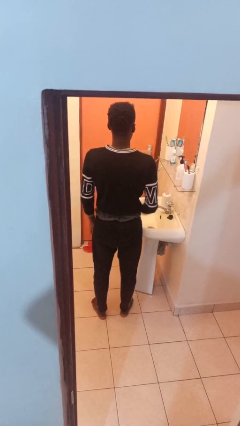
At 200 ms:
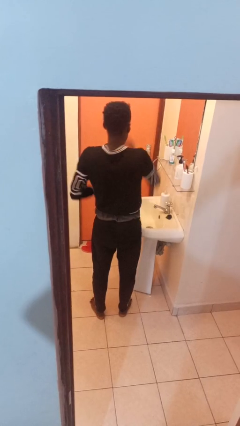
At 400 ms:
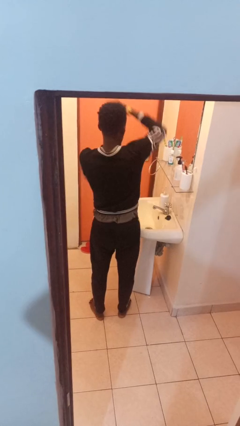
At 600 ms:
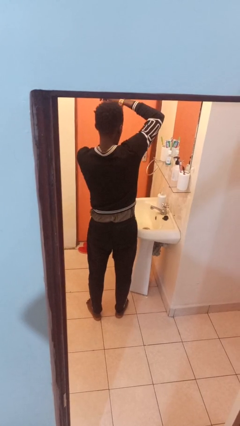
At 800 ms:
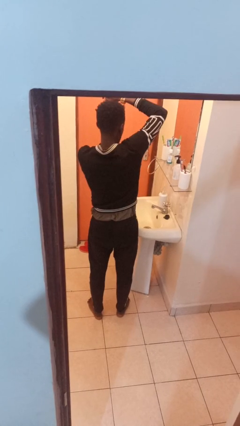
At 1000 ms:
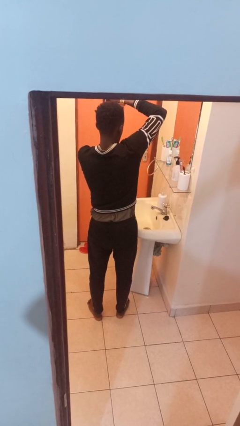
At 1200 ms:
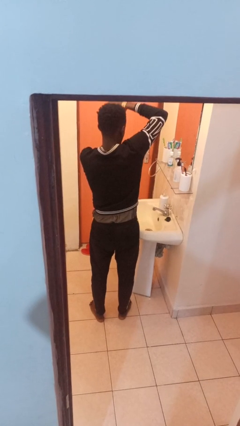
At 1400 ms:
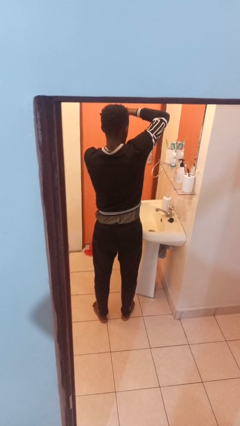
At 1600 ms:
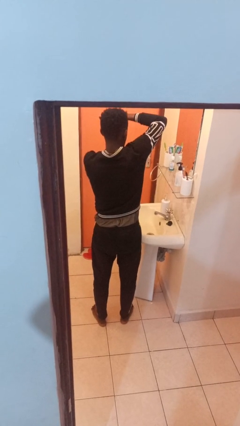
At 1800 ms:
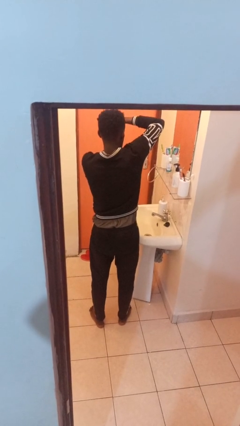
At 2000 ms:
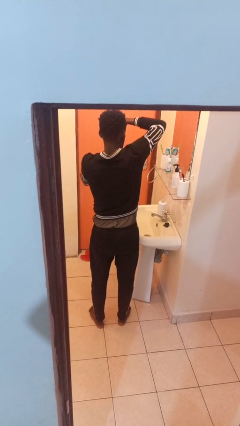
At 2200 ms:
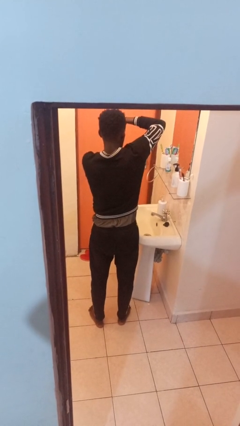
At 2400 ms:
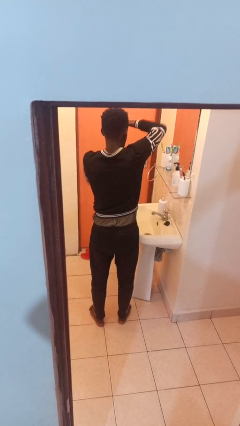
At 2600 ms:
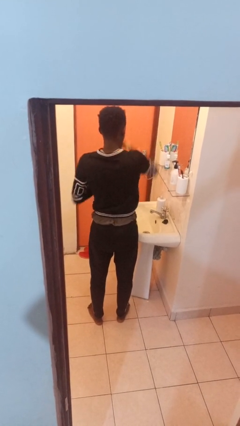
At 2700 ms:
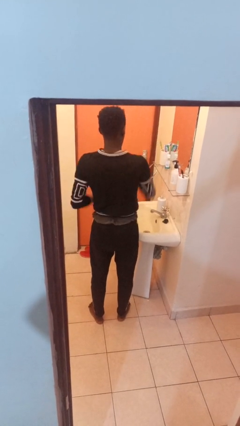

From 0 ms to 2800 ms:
person applies deodorant

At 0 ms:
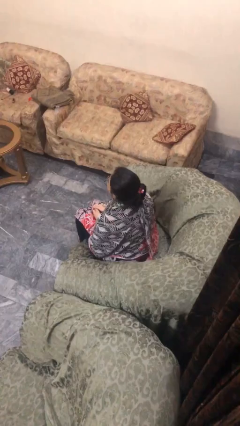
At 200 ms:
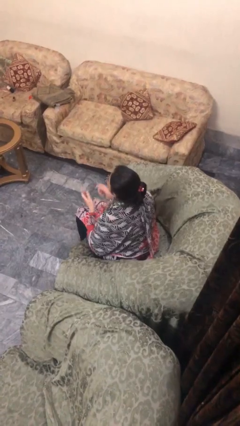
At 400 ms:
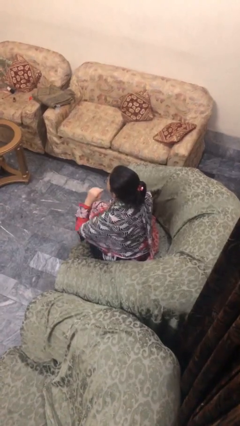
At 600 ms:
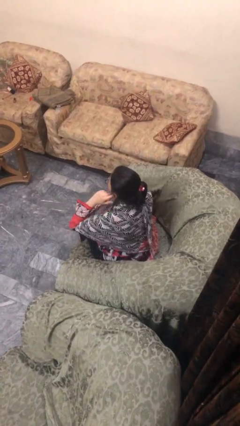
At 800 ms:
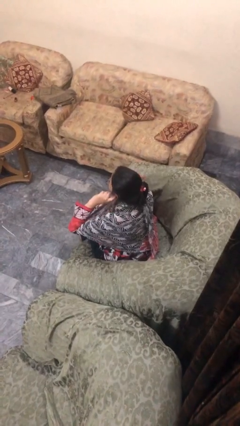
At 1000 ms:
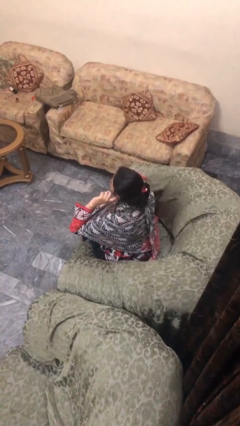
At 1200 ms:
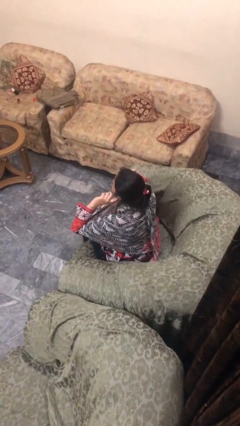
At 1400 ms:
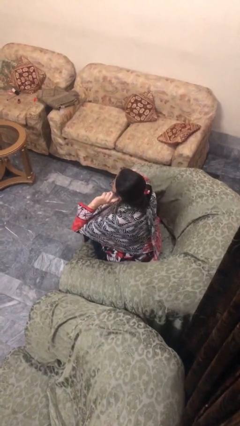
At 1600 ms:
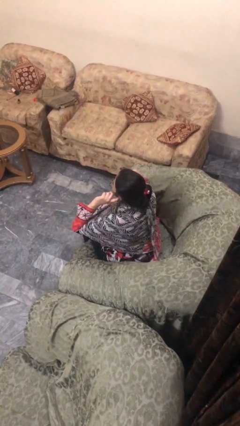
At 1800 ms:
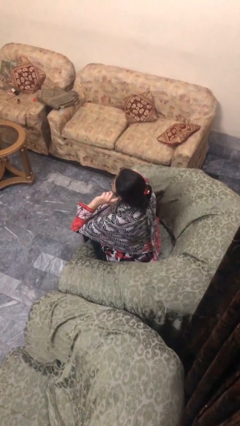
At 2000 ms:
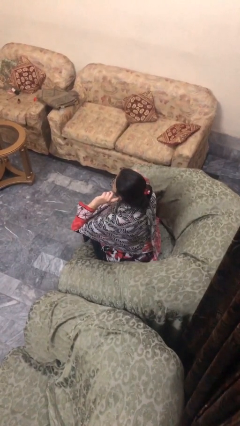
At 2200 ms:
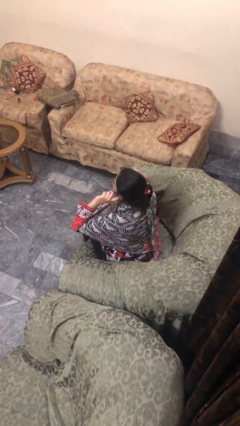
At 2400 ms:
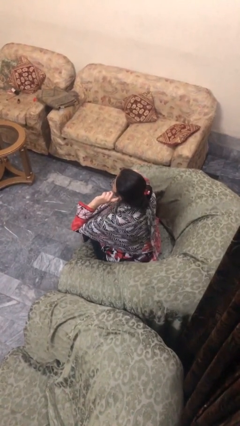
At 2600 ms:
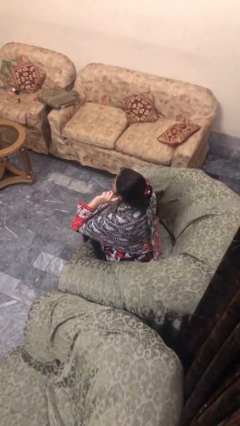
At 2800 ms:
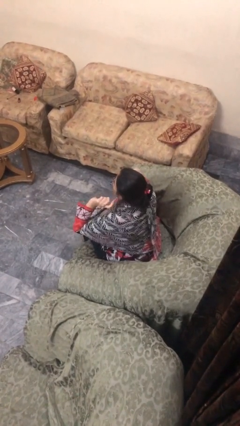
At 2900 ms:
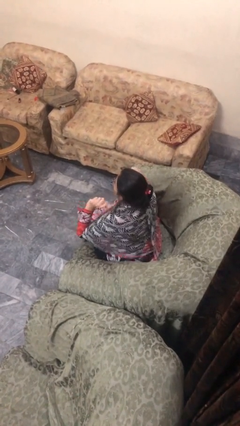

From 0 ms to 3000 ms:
person puts fingers in ear

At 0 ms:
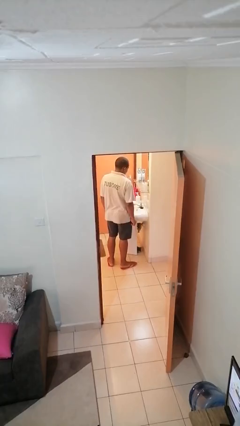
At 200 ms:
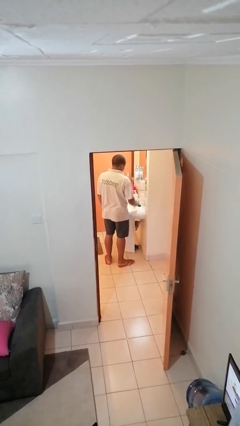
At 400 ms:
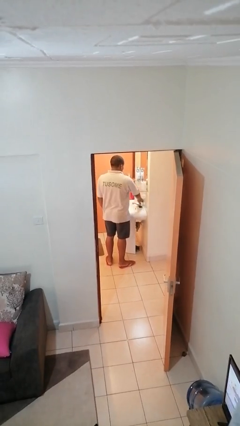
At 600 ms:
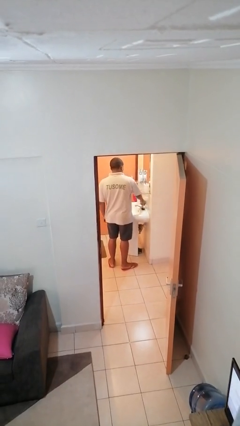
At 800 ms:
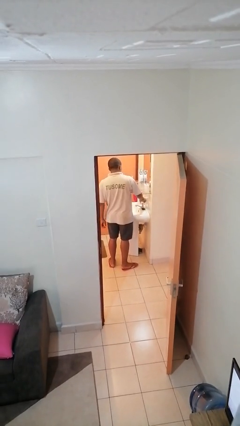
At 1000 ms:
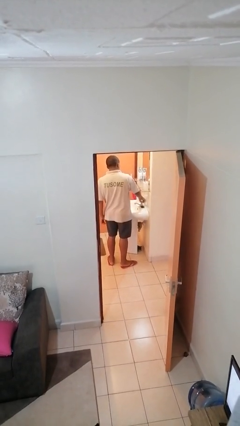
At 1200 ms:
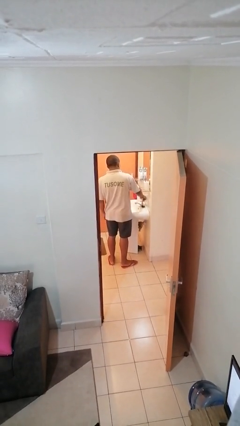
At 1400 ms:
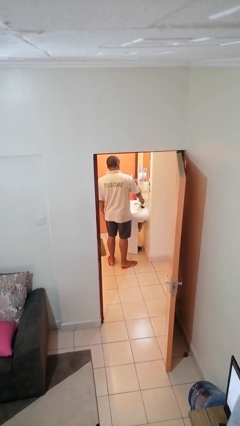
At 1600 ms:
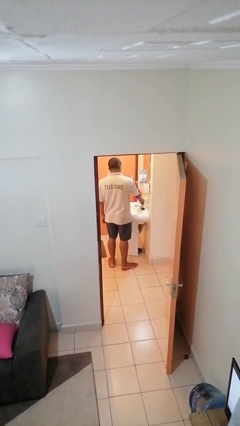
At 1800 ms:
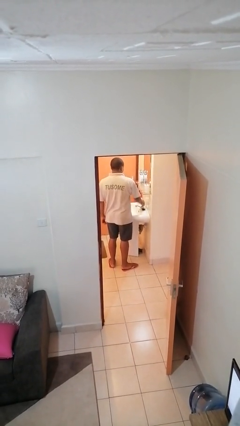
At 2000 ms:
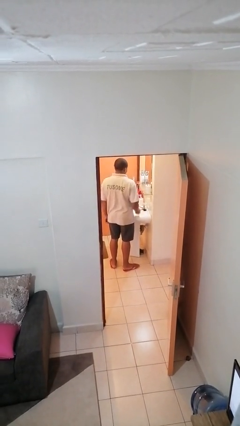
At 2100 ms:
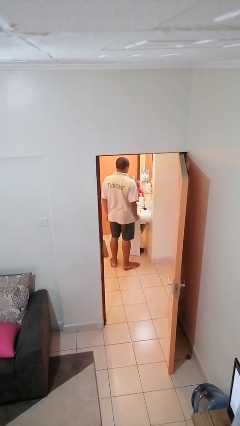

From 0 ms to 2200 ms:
person turns off faucet

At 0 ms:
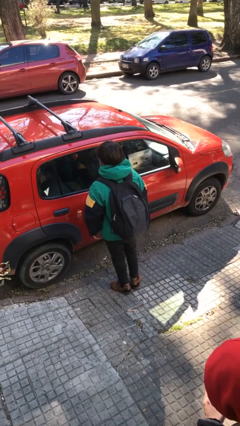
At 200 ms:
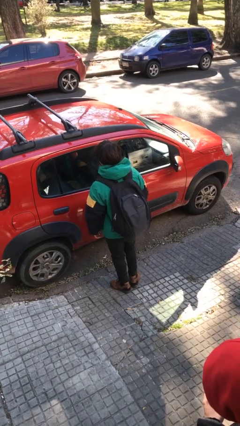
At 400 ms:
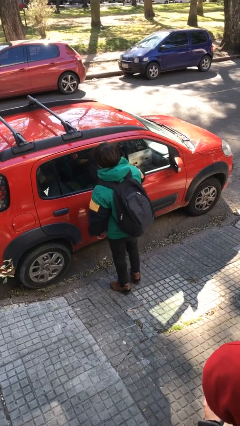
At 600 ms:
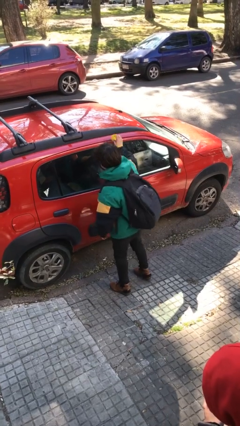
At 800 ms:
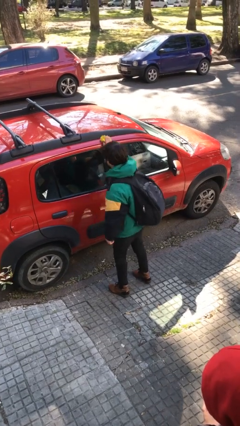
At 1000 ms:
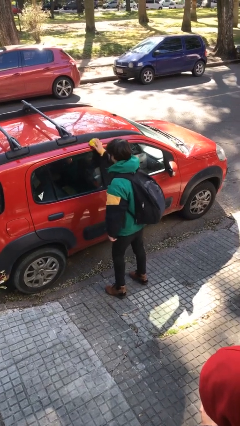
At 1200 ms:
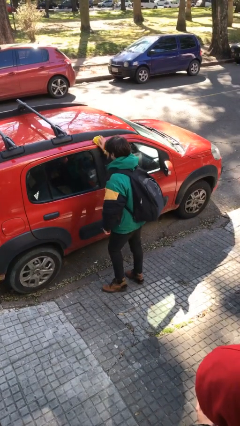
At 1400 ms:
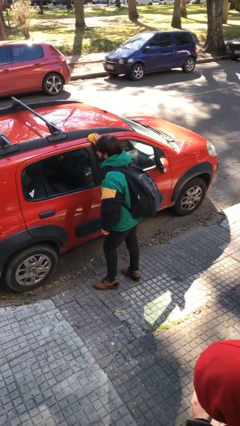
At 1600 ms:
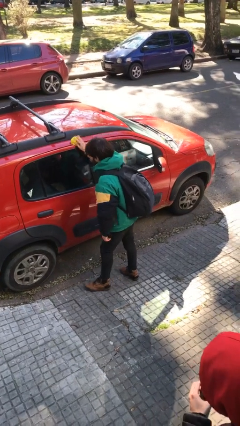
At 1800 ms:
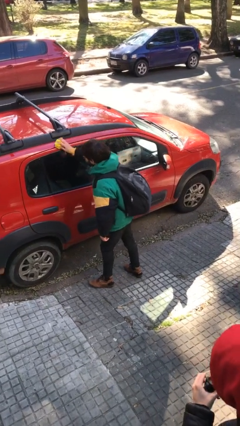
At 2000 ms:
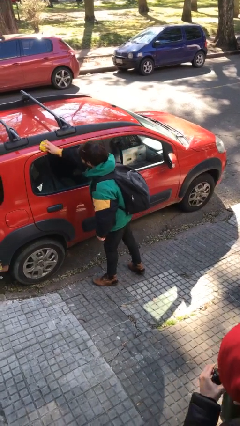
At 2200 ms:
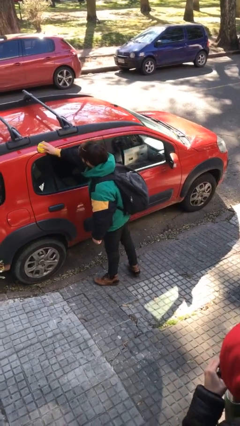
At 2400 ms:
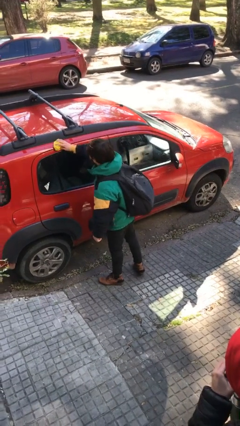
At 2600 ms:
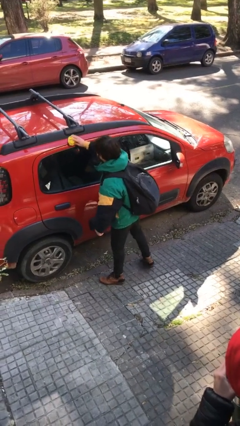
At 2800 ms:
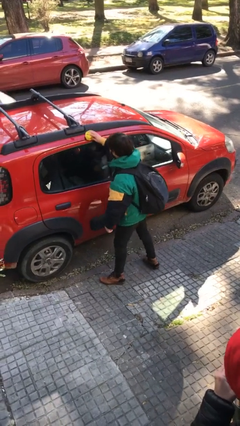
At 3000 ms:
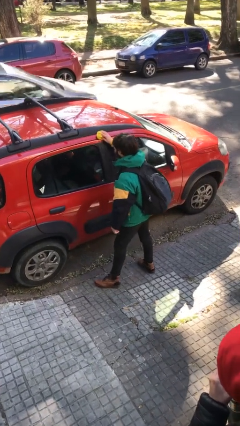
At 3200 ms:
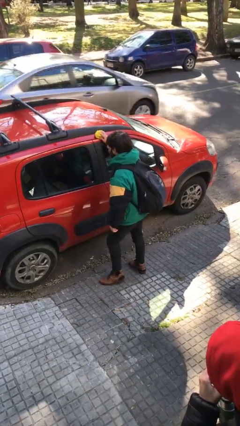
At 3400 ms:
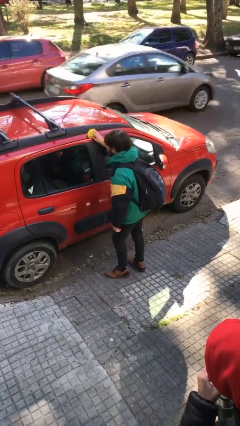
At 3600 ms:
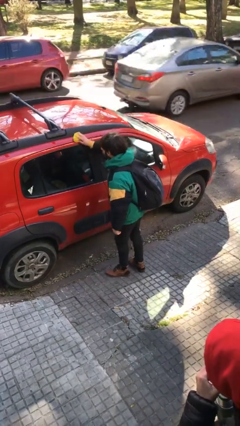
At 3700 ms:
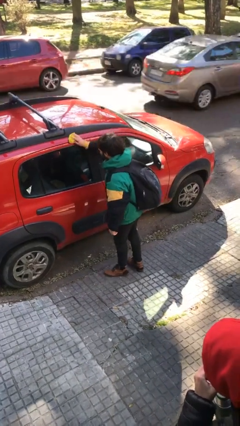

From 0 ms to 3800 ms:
person polishes car with rag

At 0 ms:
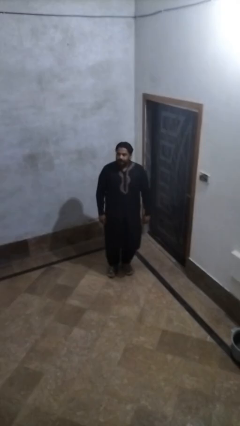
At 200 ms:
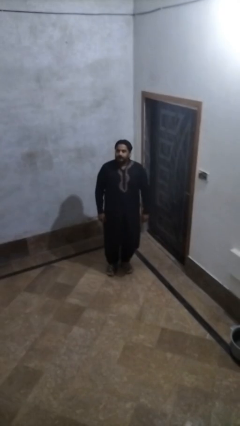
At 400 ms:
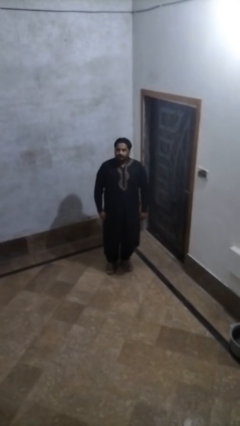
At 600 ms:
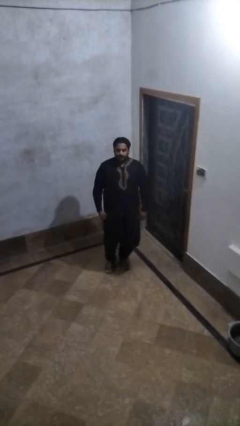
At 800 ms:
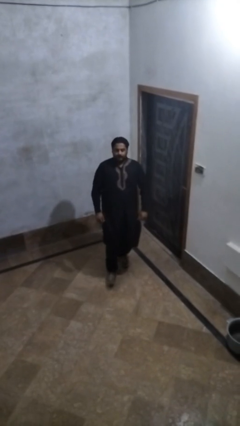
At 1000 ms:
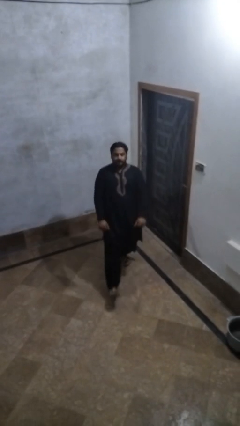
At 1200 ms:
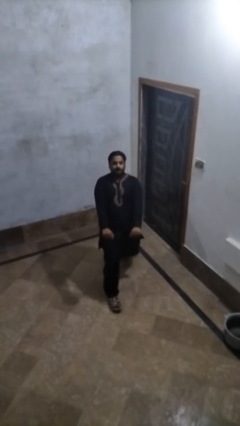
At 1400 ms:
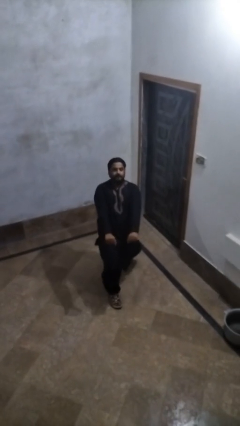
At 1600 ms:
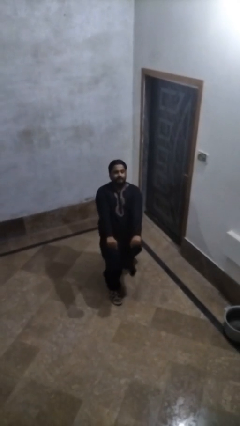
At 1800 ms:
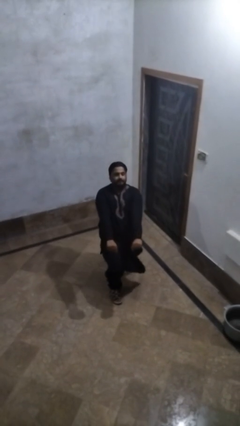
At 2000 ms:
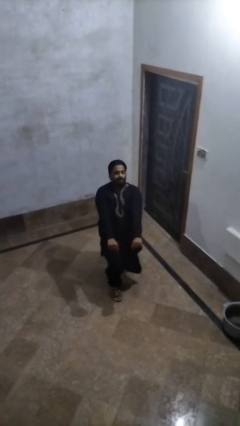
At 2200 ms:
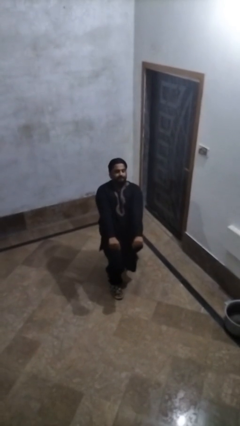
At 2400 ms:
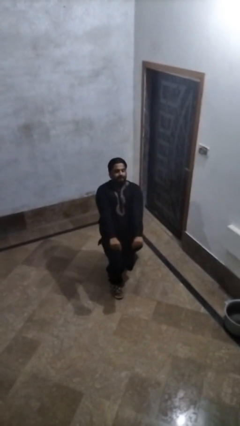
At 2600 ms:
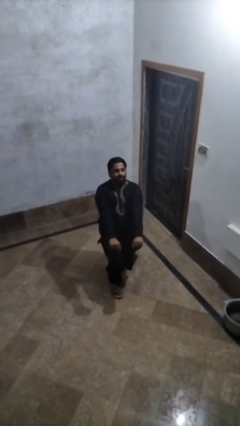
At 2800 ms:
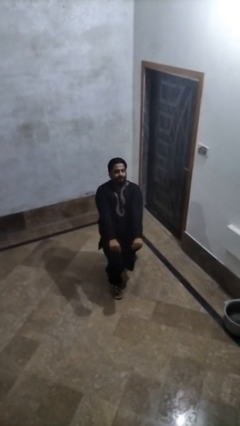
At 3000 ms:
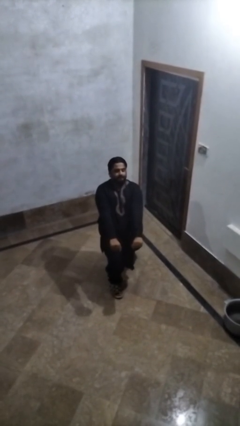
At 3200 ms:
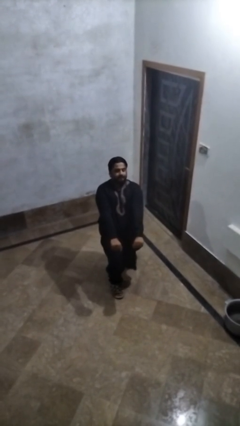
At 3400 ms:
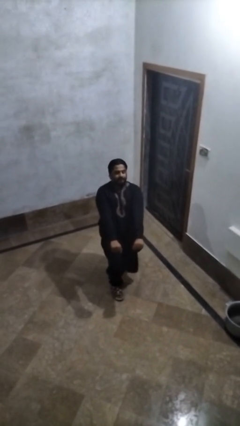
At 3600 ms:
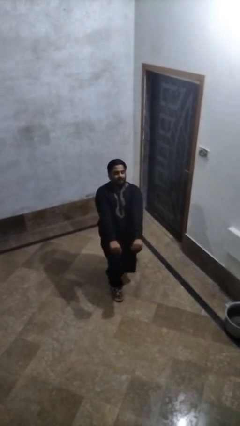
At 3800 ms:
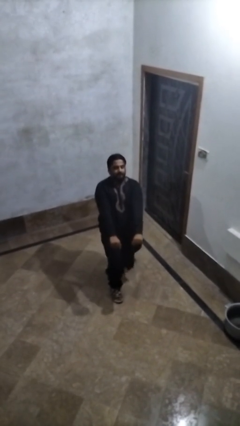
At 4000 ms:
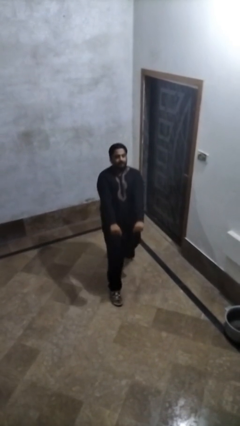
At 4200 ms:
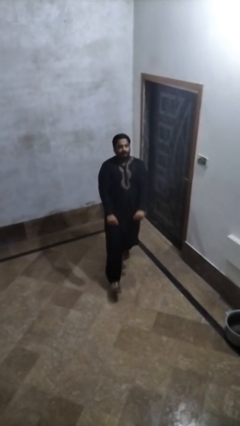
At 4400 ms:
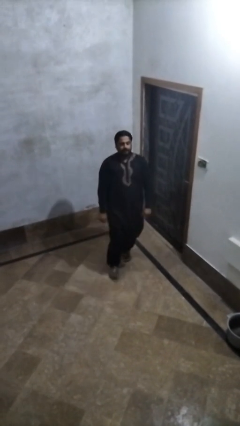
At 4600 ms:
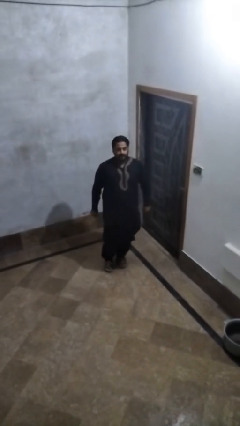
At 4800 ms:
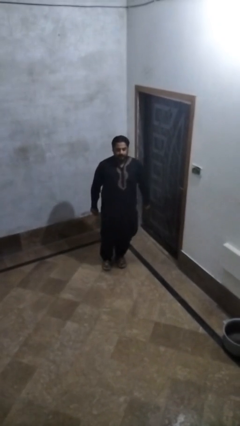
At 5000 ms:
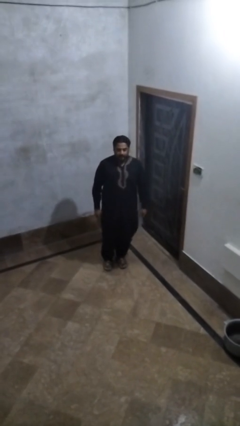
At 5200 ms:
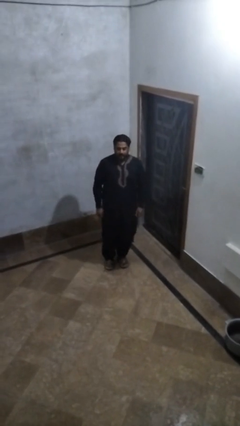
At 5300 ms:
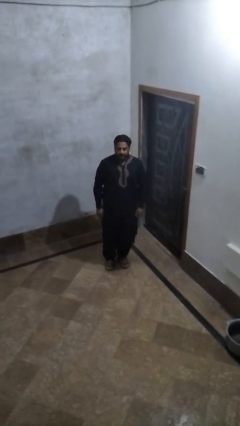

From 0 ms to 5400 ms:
person exercises with lunges

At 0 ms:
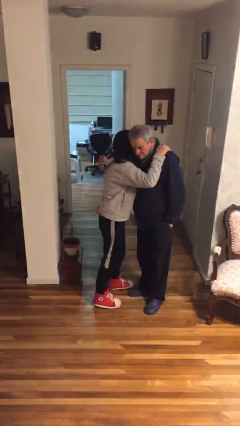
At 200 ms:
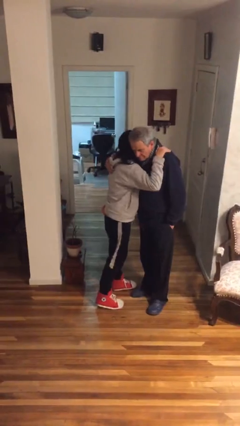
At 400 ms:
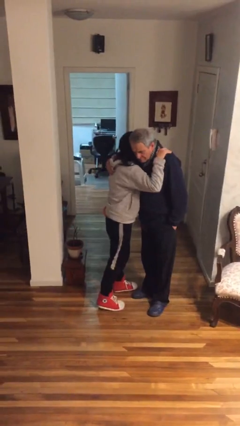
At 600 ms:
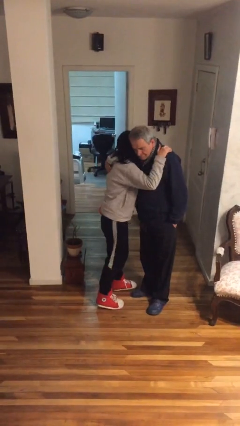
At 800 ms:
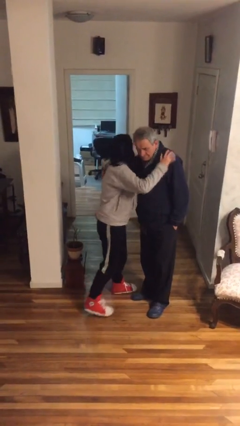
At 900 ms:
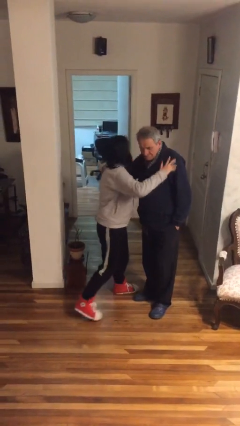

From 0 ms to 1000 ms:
person embraces person
